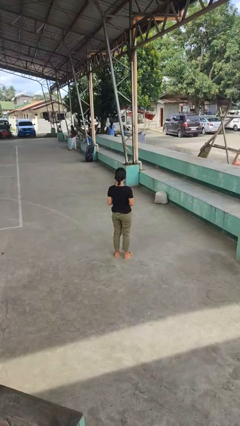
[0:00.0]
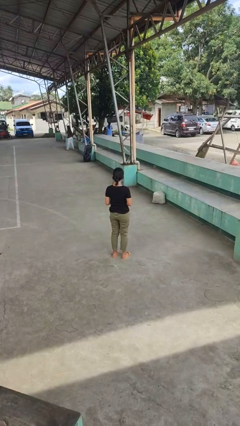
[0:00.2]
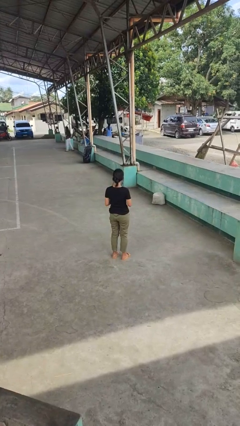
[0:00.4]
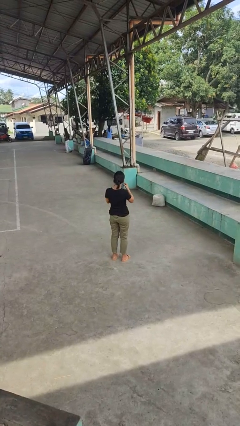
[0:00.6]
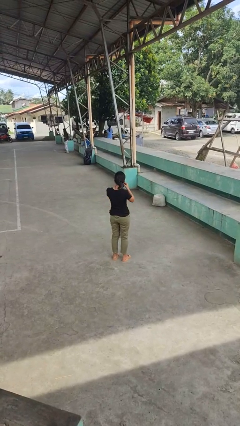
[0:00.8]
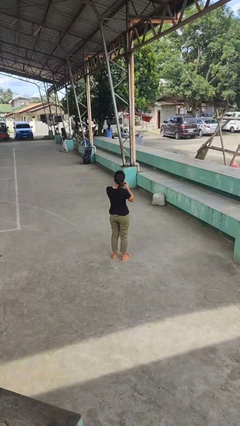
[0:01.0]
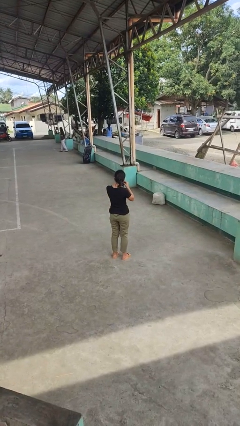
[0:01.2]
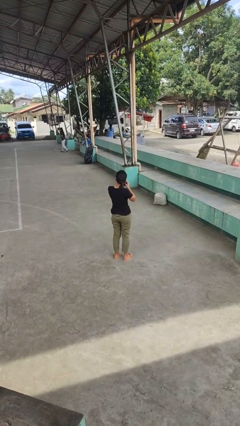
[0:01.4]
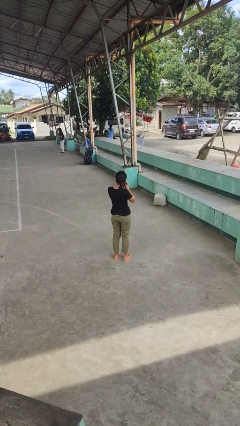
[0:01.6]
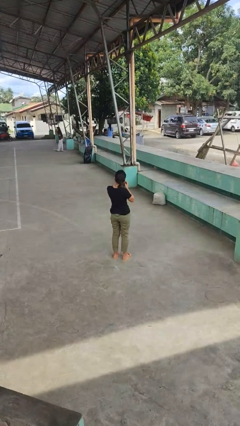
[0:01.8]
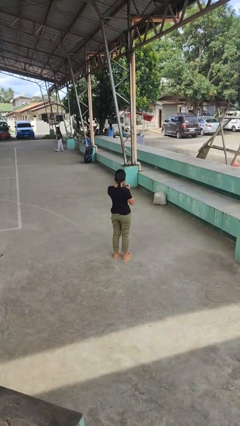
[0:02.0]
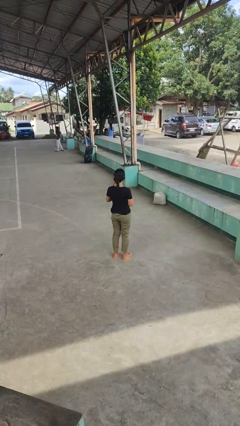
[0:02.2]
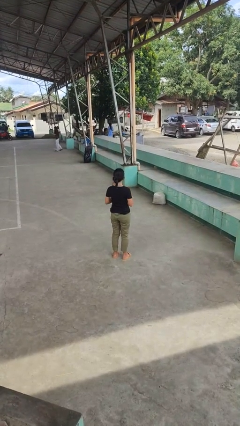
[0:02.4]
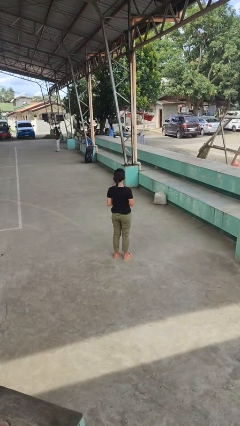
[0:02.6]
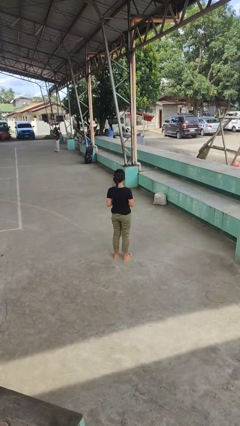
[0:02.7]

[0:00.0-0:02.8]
person takes off earrings

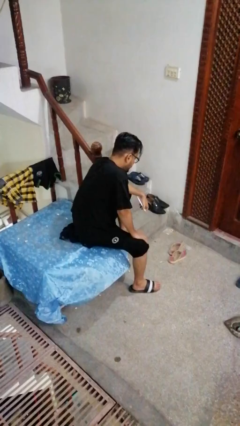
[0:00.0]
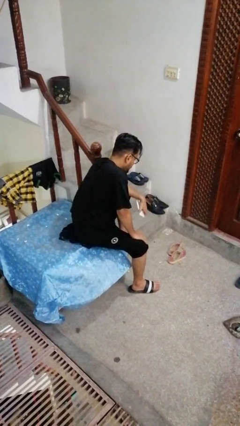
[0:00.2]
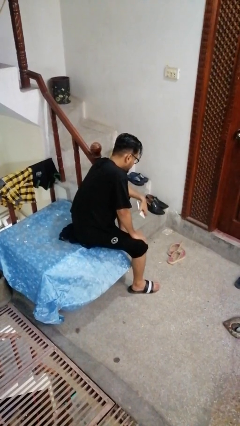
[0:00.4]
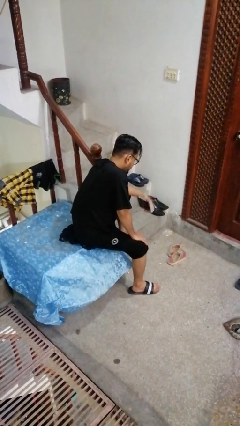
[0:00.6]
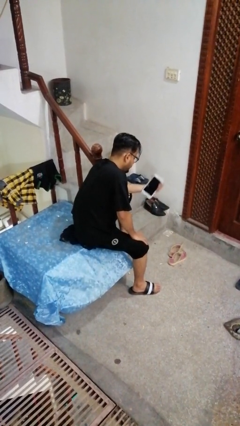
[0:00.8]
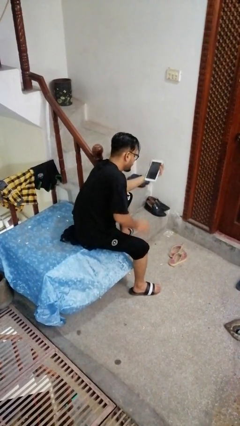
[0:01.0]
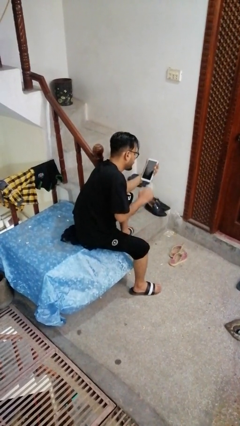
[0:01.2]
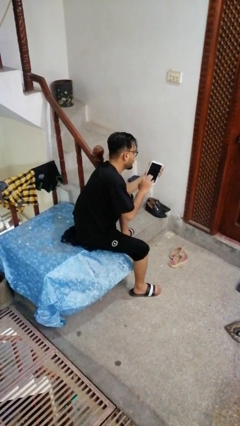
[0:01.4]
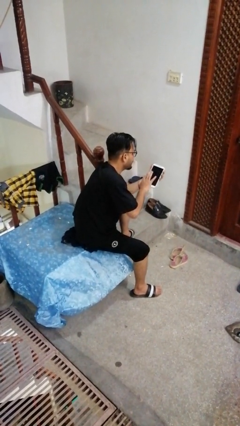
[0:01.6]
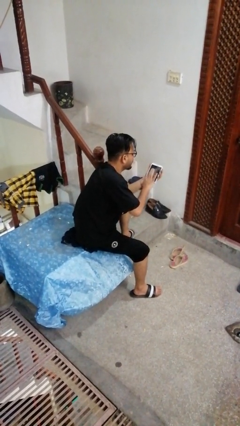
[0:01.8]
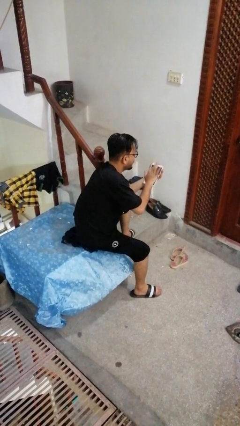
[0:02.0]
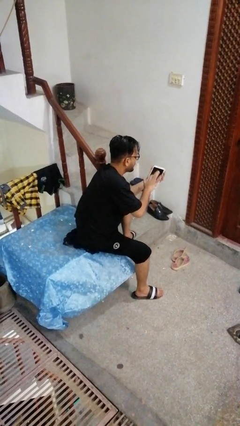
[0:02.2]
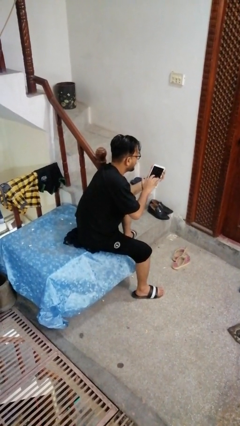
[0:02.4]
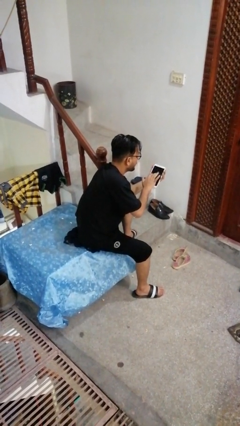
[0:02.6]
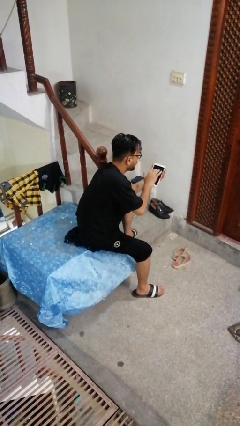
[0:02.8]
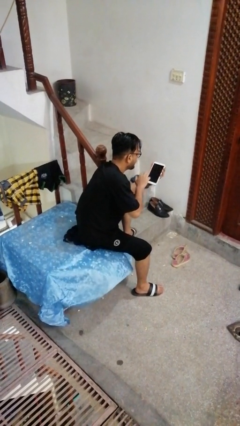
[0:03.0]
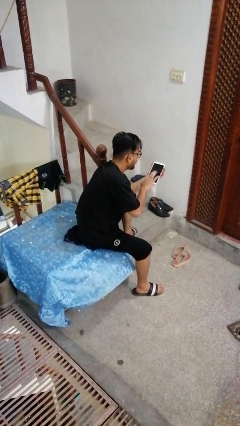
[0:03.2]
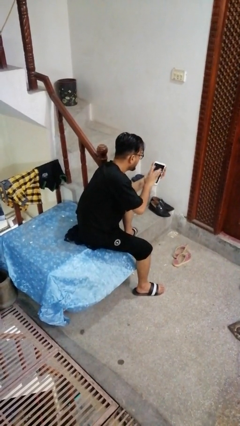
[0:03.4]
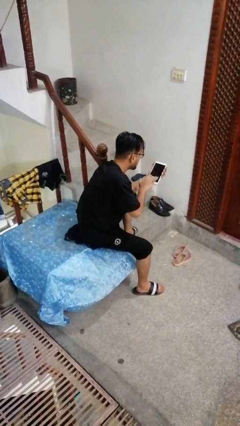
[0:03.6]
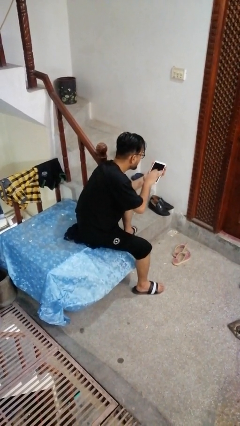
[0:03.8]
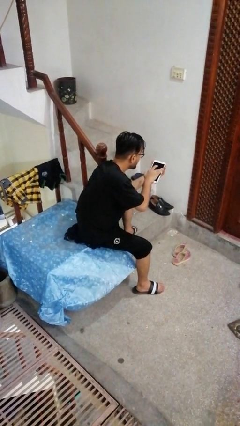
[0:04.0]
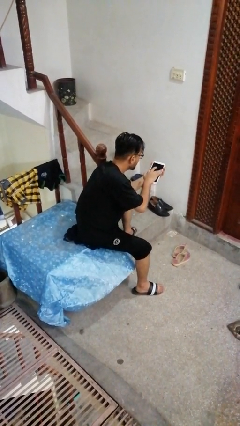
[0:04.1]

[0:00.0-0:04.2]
person interacts with tablet

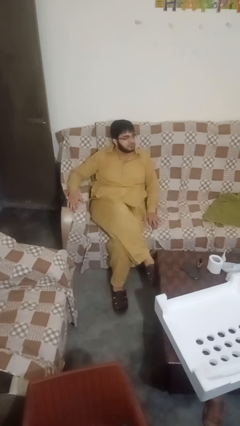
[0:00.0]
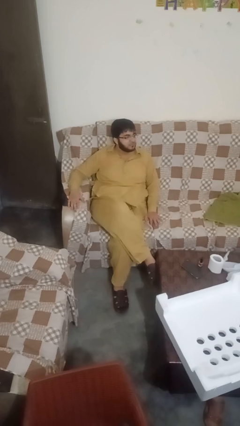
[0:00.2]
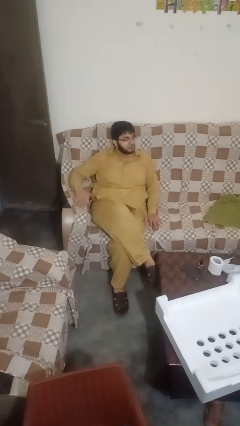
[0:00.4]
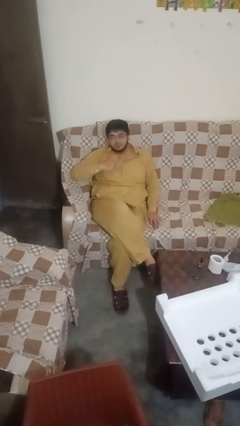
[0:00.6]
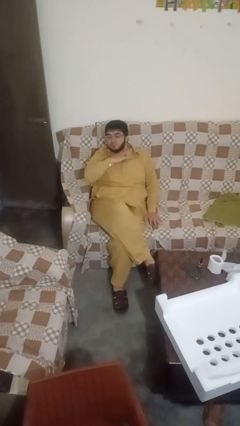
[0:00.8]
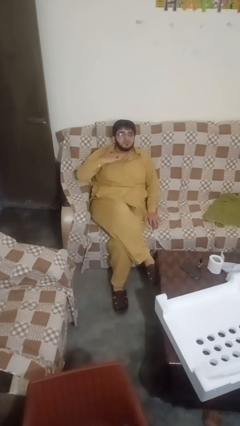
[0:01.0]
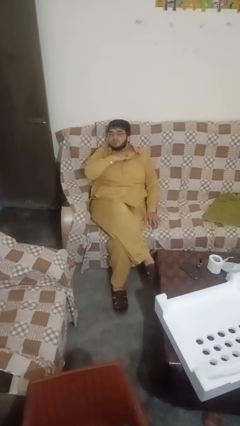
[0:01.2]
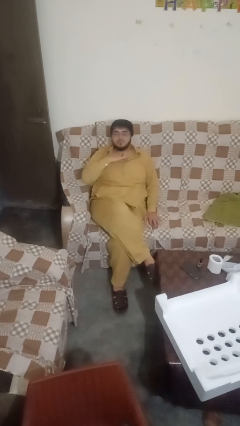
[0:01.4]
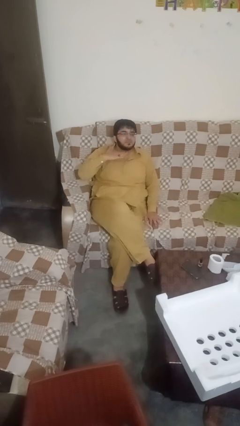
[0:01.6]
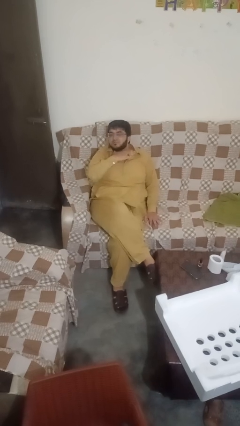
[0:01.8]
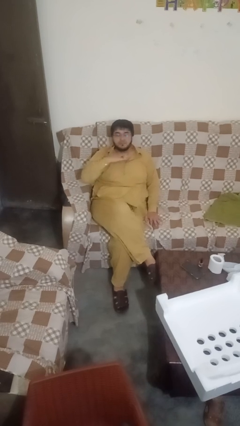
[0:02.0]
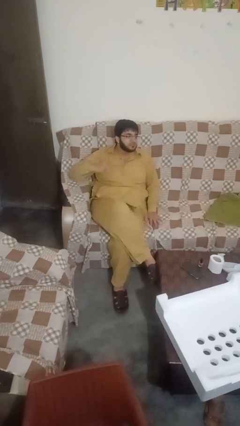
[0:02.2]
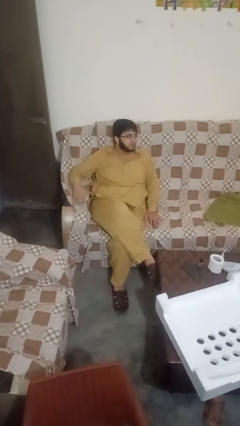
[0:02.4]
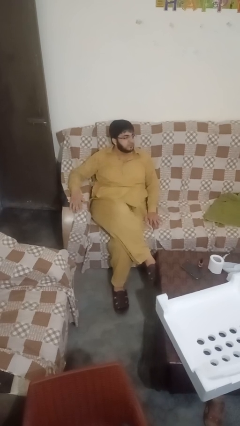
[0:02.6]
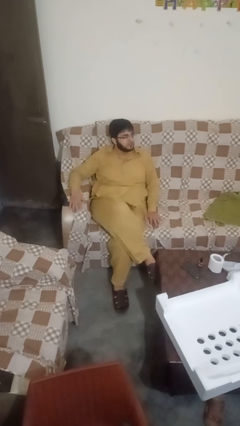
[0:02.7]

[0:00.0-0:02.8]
person gestures cut

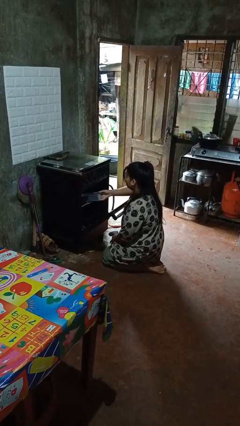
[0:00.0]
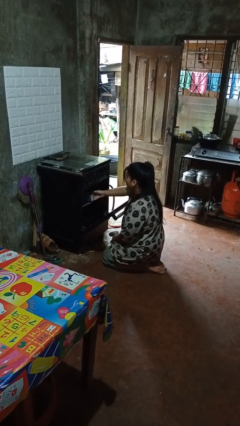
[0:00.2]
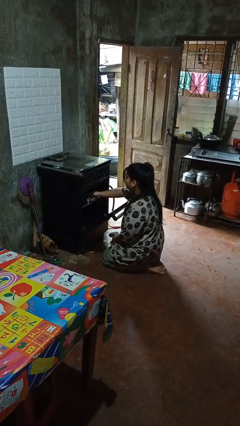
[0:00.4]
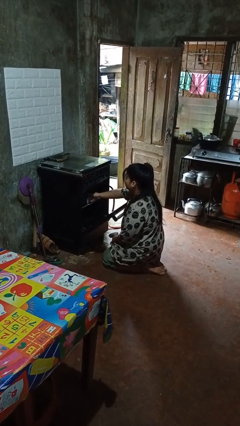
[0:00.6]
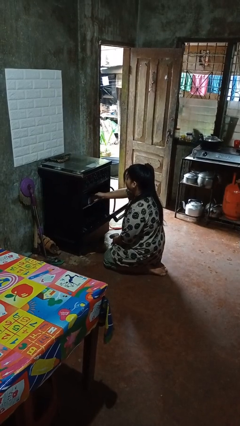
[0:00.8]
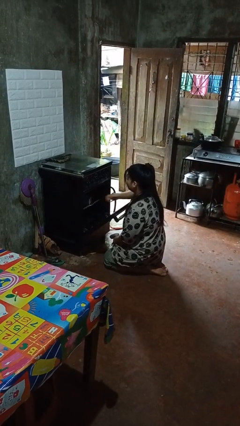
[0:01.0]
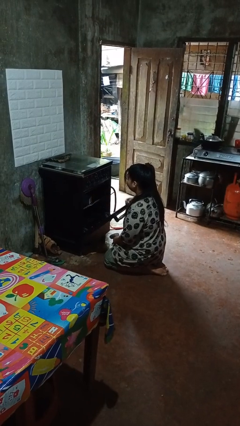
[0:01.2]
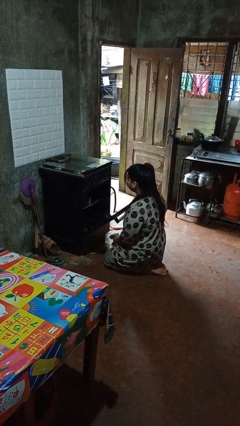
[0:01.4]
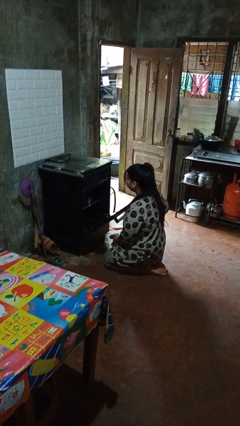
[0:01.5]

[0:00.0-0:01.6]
person puts object into oven

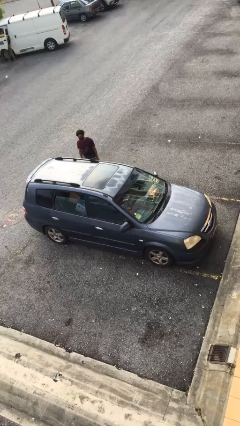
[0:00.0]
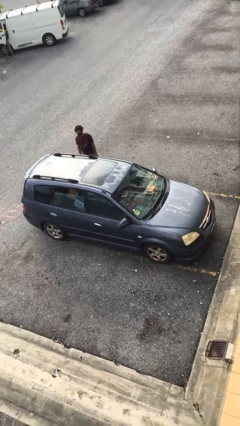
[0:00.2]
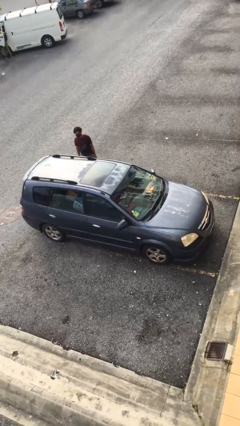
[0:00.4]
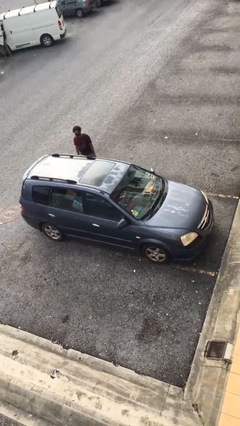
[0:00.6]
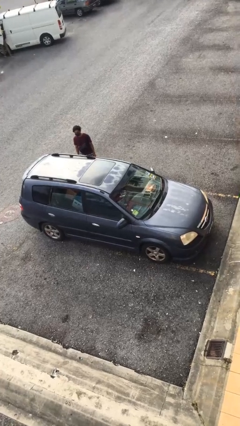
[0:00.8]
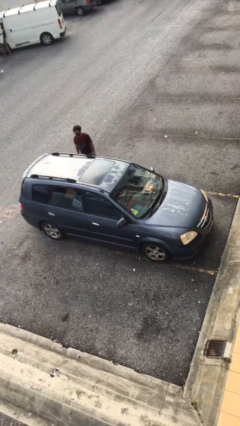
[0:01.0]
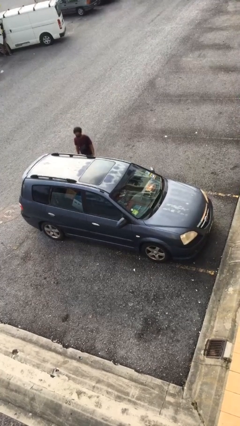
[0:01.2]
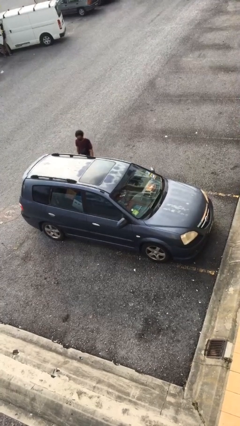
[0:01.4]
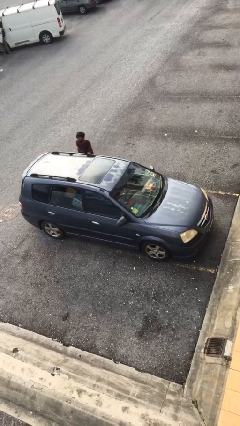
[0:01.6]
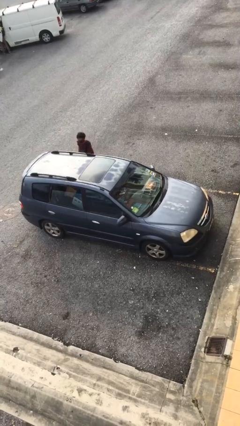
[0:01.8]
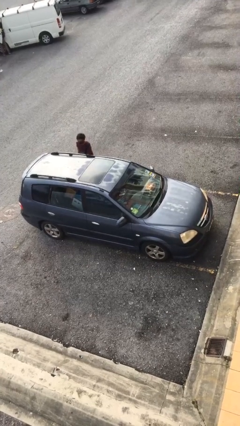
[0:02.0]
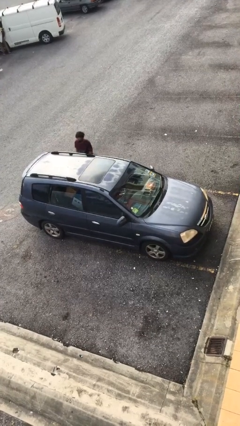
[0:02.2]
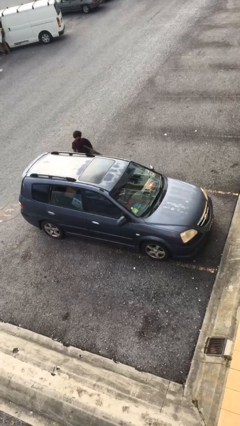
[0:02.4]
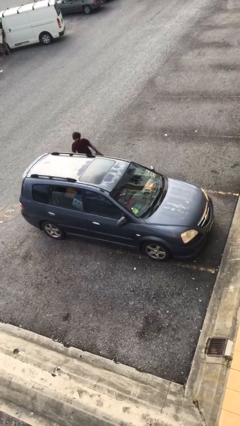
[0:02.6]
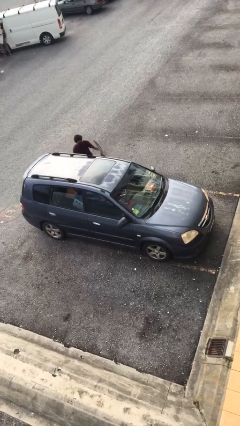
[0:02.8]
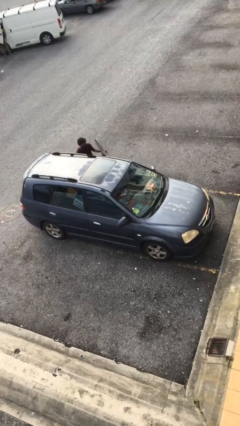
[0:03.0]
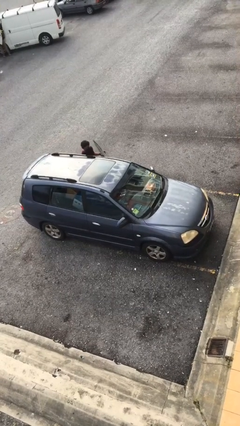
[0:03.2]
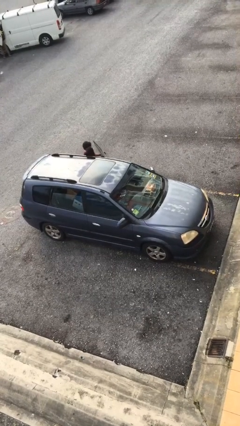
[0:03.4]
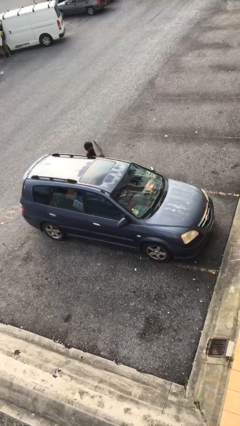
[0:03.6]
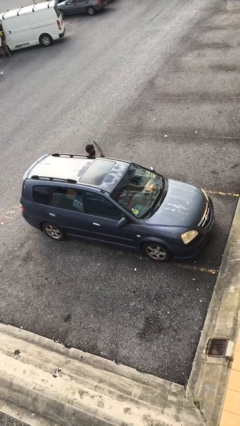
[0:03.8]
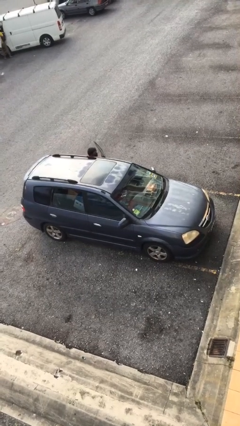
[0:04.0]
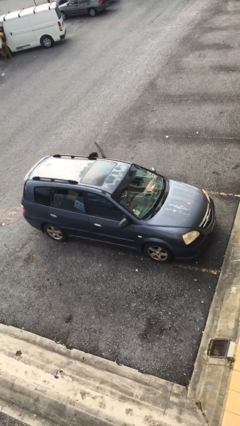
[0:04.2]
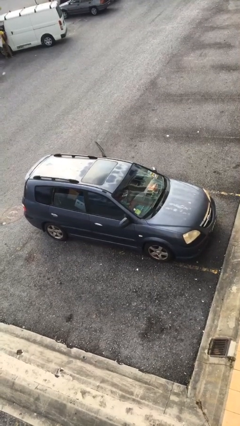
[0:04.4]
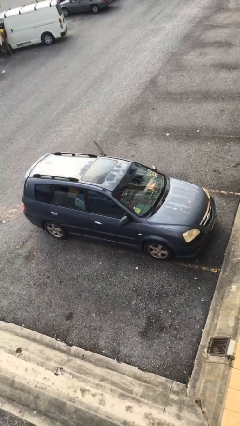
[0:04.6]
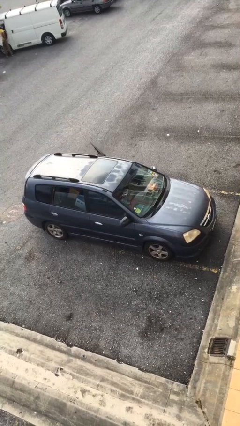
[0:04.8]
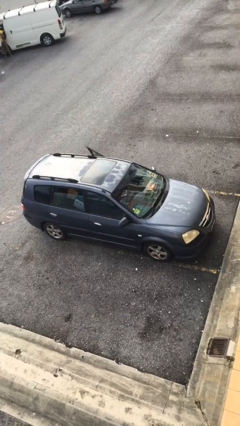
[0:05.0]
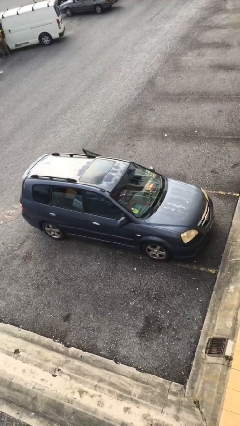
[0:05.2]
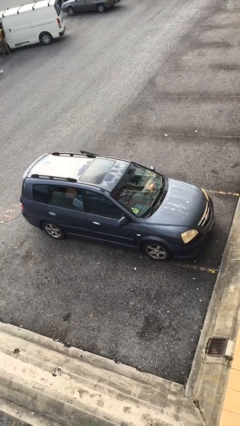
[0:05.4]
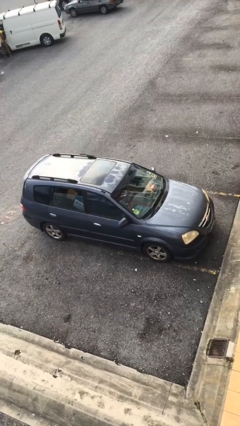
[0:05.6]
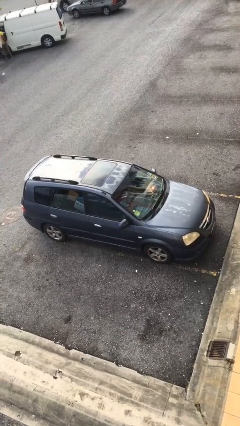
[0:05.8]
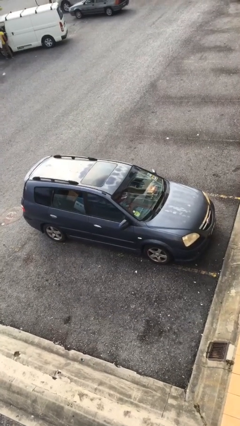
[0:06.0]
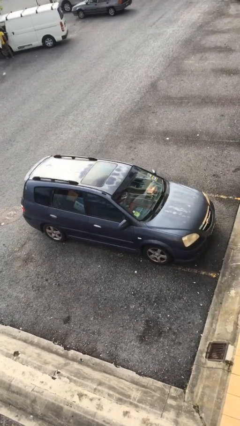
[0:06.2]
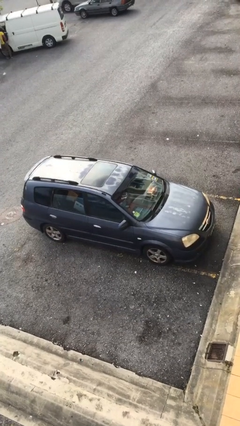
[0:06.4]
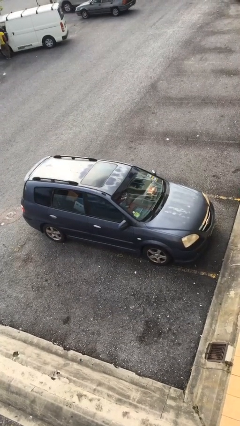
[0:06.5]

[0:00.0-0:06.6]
car picks up person
